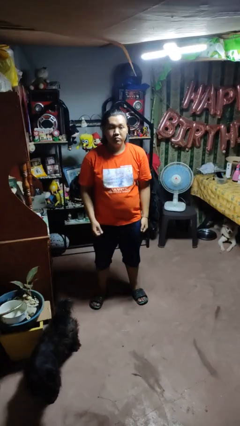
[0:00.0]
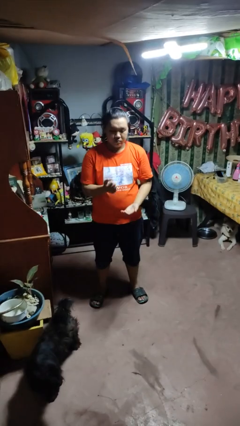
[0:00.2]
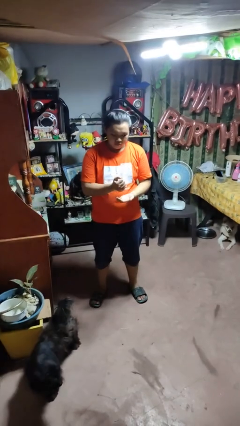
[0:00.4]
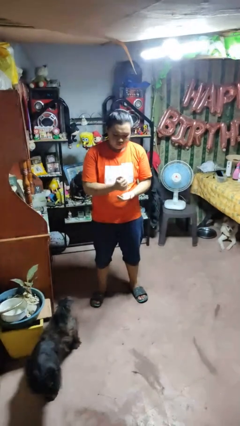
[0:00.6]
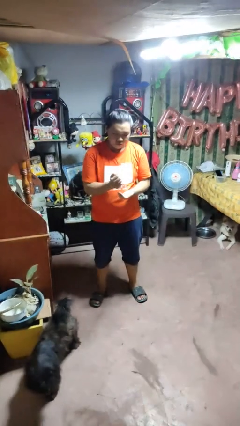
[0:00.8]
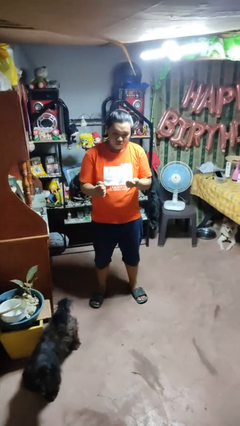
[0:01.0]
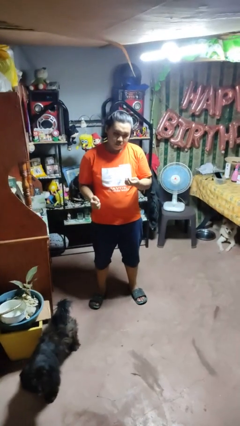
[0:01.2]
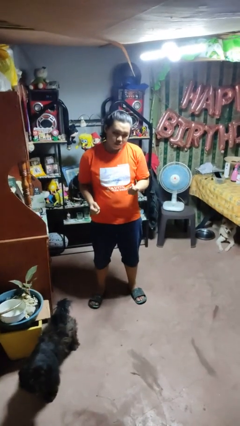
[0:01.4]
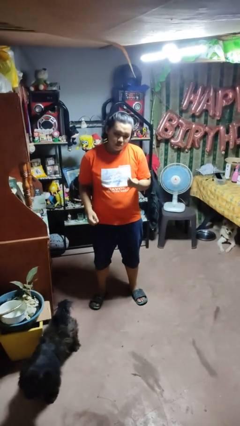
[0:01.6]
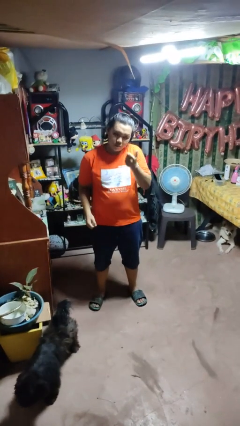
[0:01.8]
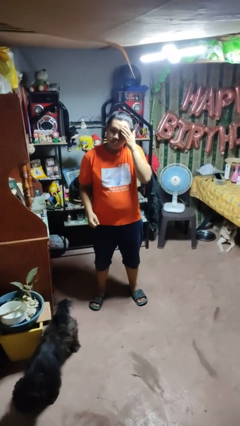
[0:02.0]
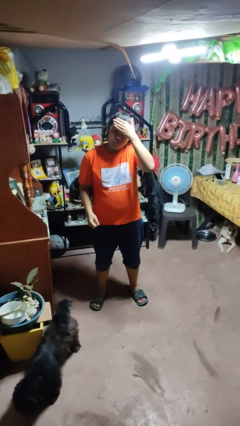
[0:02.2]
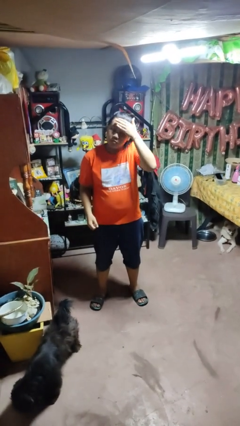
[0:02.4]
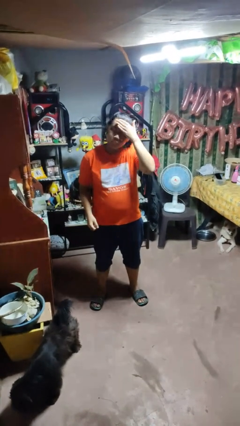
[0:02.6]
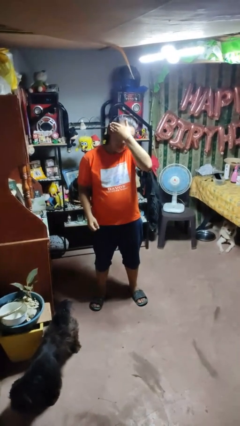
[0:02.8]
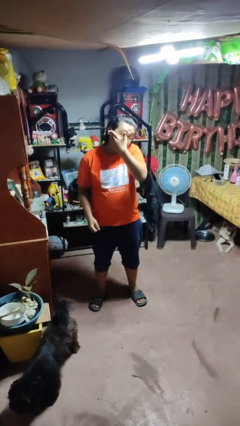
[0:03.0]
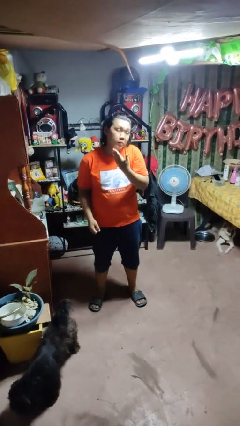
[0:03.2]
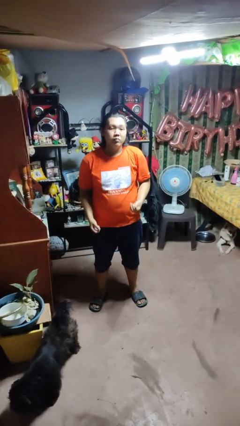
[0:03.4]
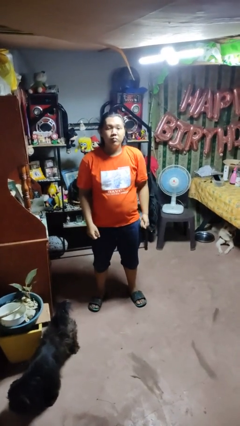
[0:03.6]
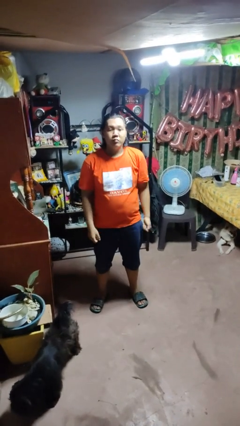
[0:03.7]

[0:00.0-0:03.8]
person applies facial moisturizer

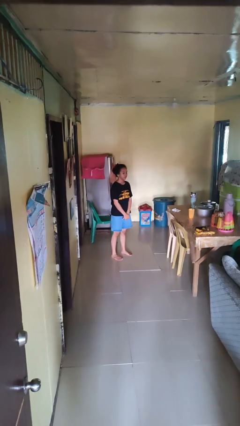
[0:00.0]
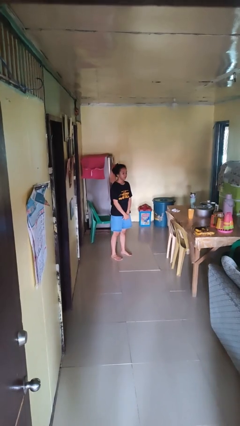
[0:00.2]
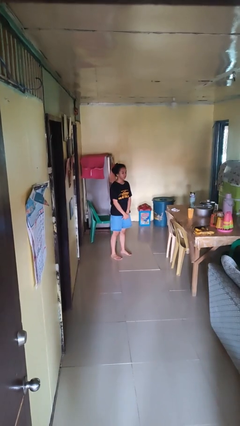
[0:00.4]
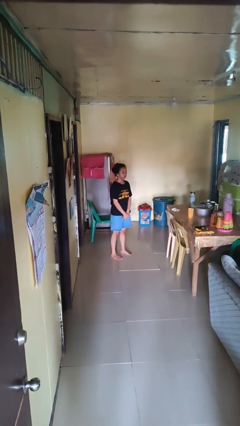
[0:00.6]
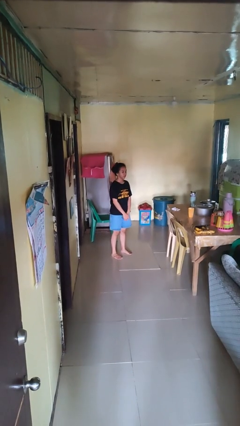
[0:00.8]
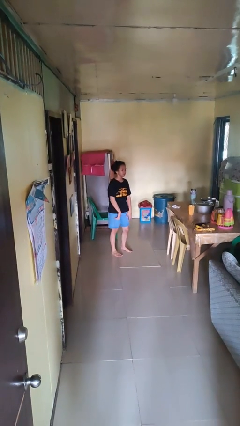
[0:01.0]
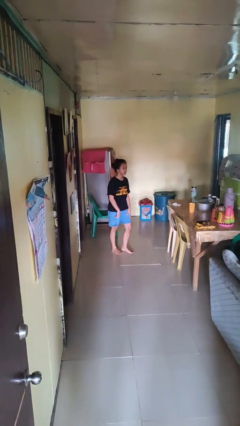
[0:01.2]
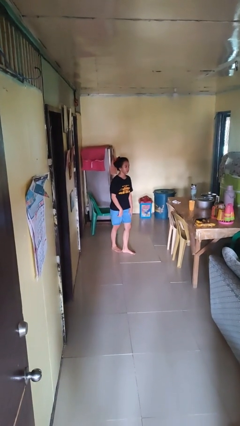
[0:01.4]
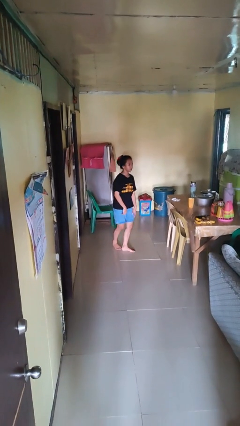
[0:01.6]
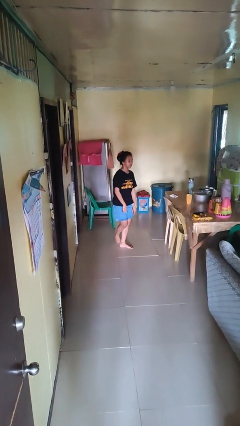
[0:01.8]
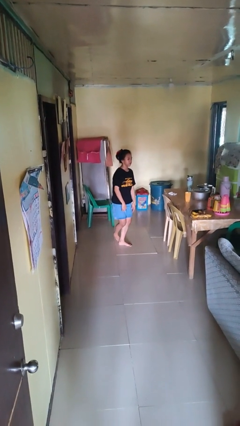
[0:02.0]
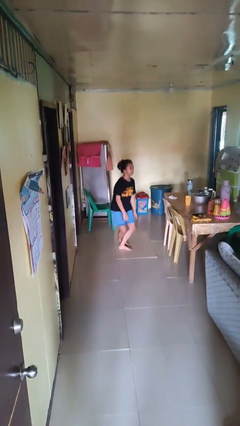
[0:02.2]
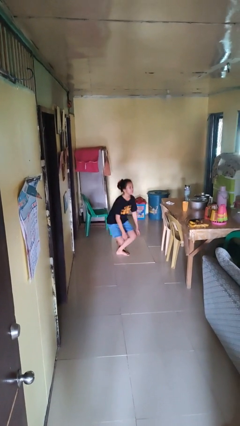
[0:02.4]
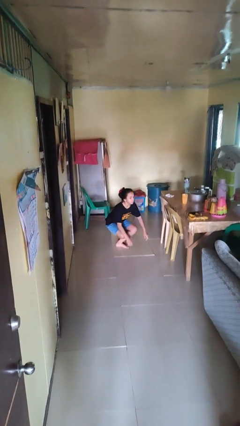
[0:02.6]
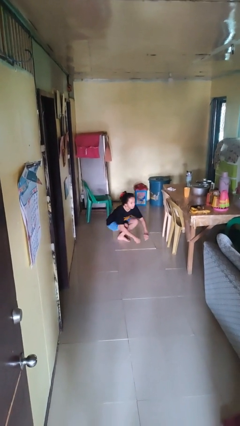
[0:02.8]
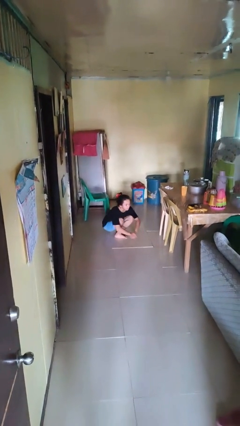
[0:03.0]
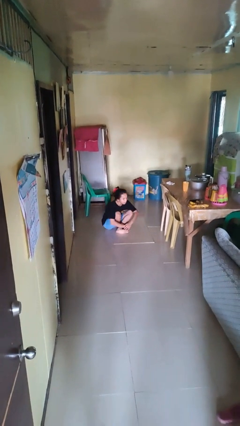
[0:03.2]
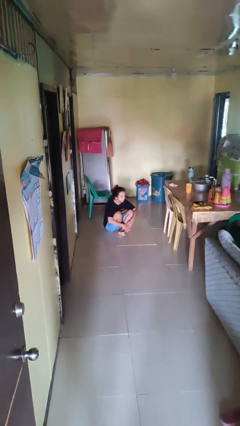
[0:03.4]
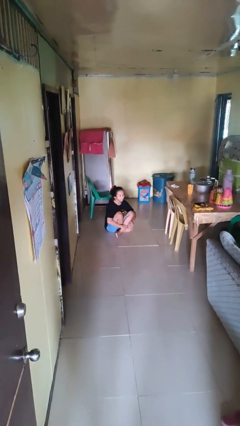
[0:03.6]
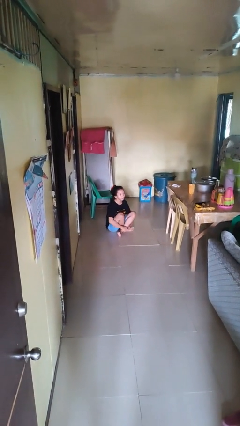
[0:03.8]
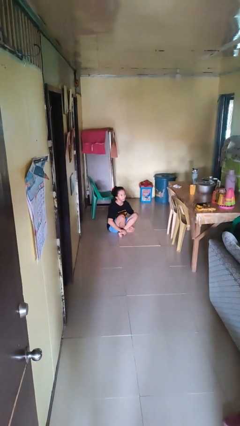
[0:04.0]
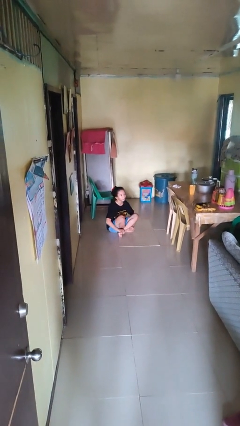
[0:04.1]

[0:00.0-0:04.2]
person sits crisscross

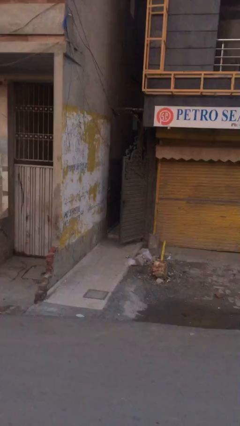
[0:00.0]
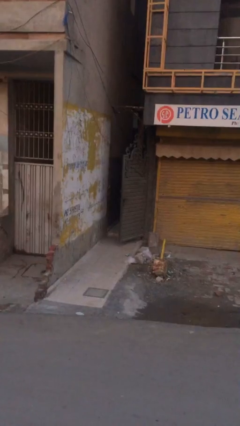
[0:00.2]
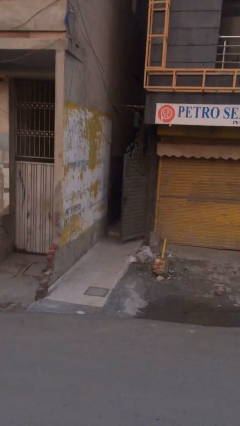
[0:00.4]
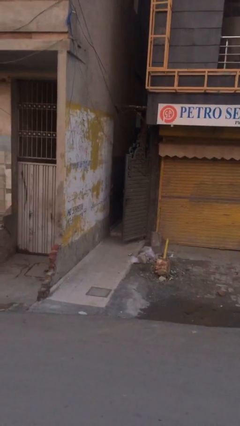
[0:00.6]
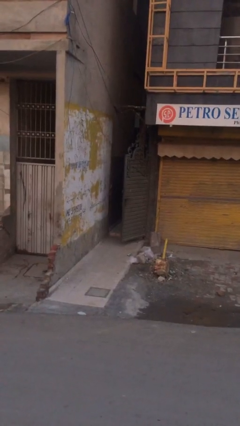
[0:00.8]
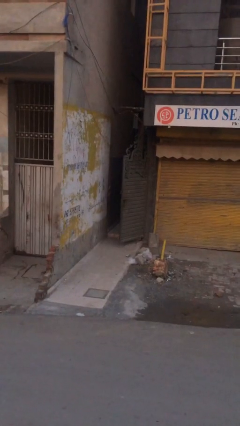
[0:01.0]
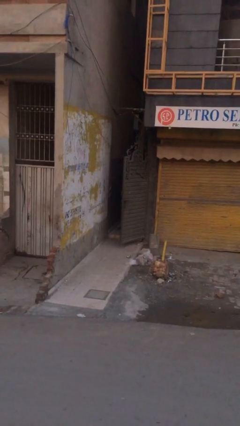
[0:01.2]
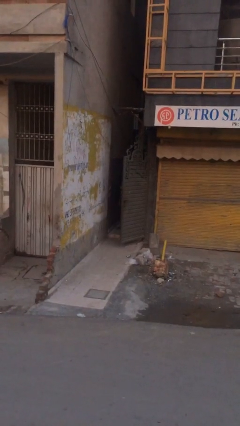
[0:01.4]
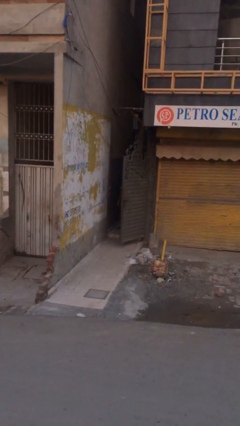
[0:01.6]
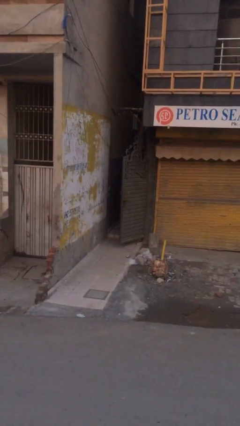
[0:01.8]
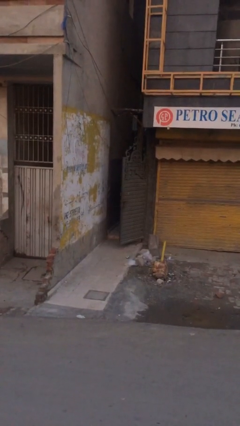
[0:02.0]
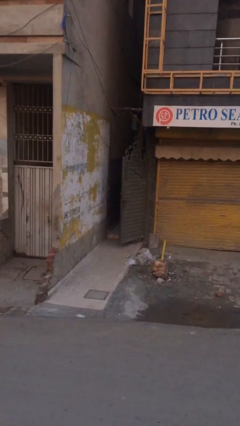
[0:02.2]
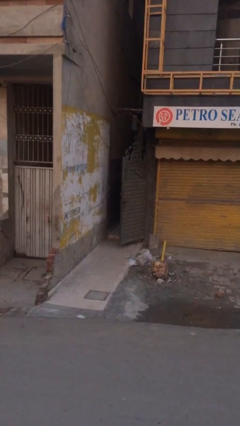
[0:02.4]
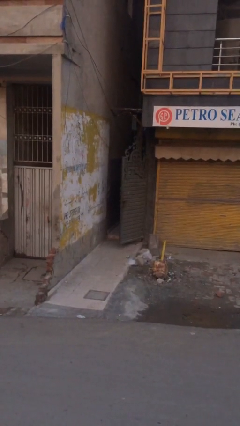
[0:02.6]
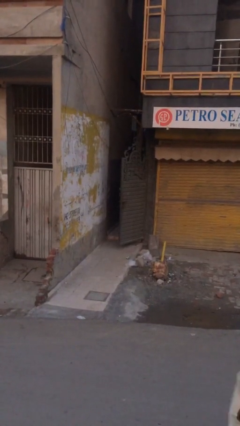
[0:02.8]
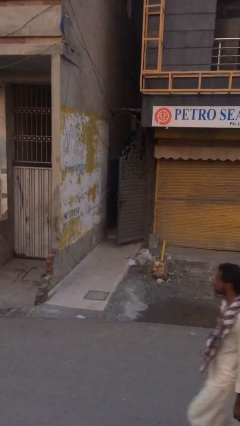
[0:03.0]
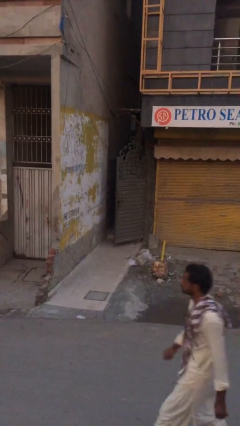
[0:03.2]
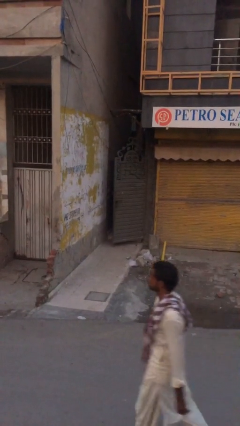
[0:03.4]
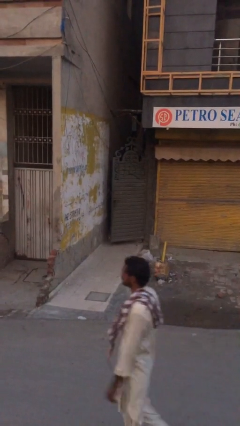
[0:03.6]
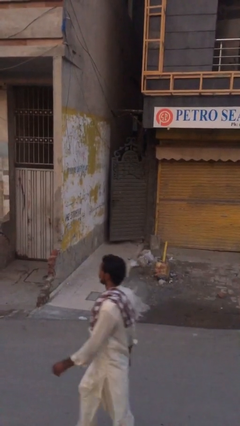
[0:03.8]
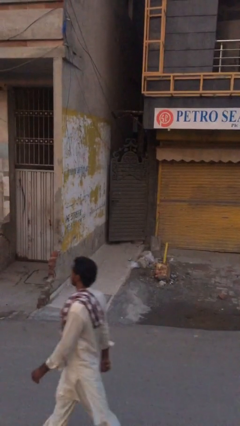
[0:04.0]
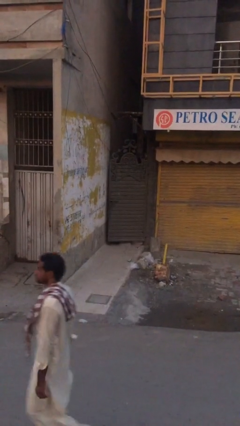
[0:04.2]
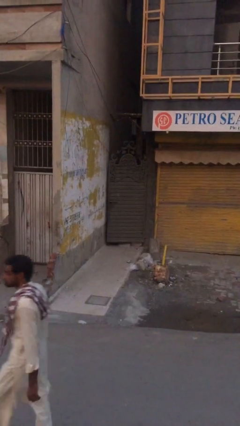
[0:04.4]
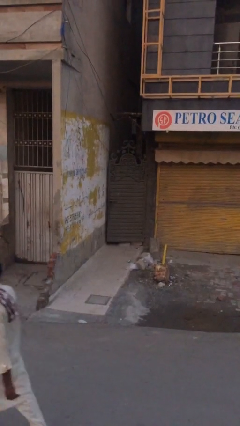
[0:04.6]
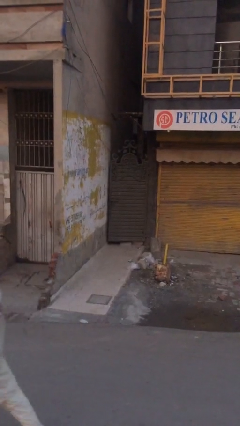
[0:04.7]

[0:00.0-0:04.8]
person closes facility door

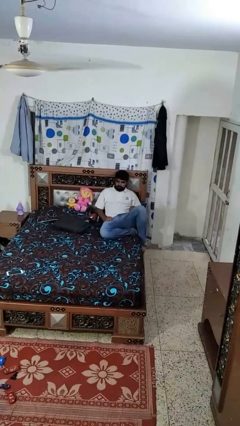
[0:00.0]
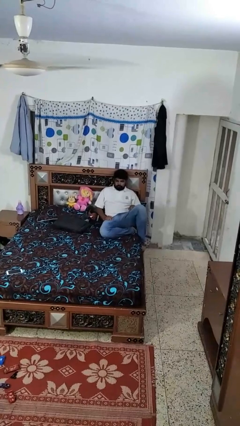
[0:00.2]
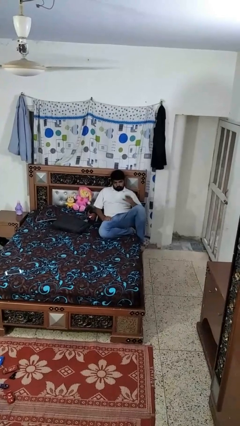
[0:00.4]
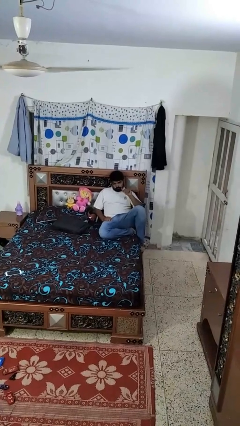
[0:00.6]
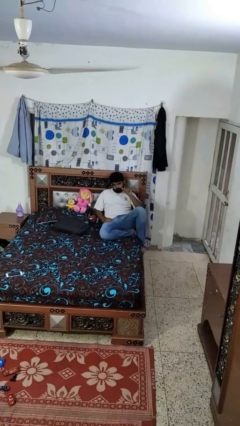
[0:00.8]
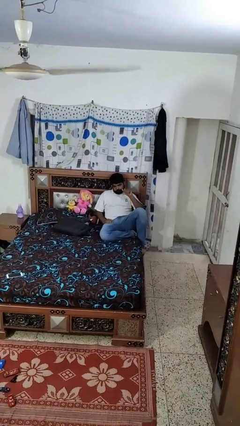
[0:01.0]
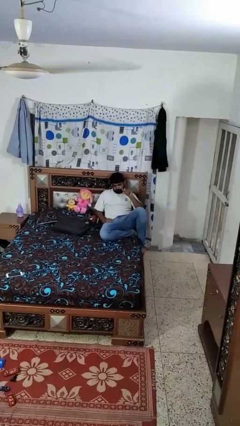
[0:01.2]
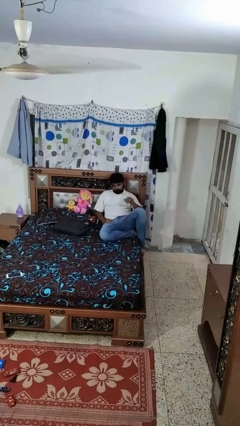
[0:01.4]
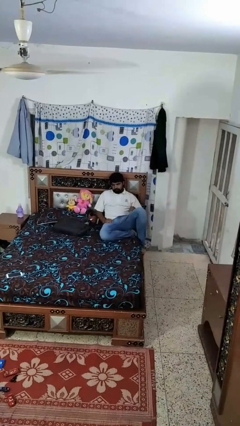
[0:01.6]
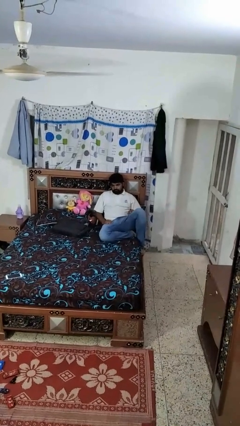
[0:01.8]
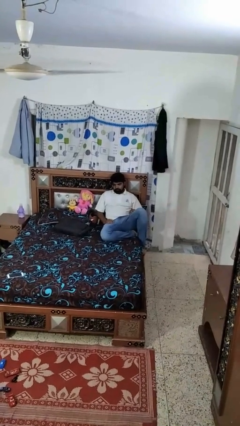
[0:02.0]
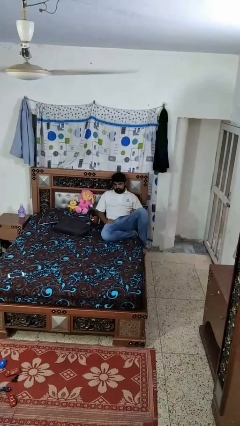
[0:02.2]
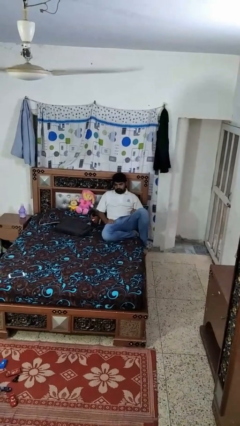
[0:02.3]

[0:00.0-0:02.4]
person gestures come here

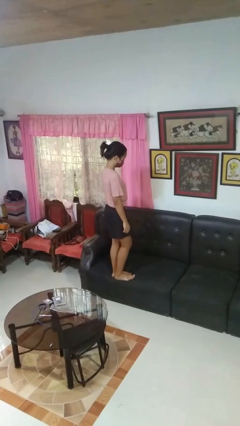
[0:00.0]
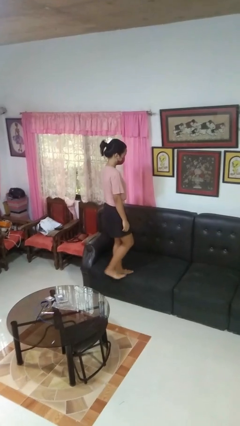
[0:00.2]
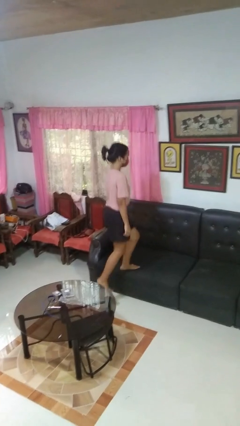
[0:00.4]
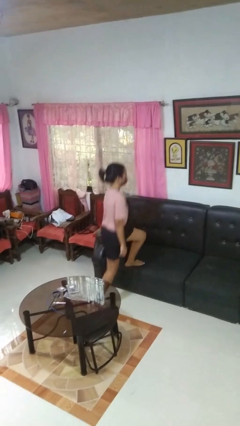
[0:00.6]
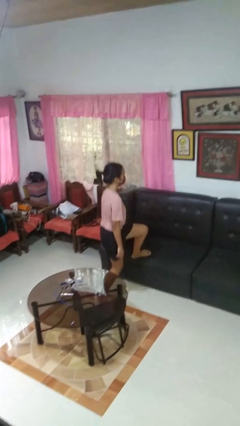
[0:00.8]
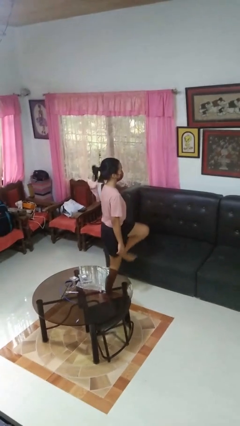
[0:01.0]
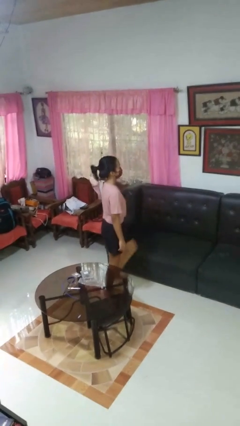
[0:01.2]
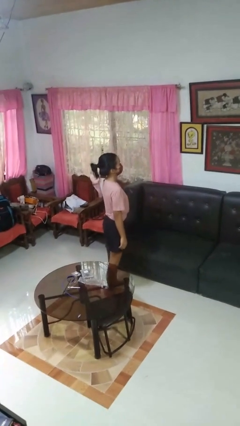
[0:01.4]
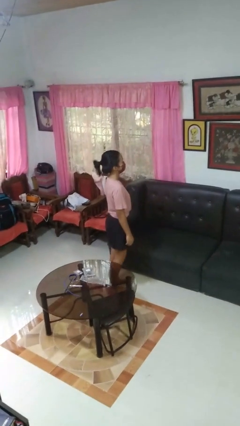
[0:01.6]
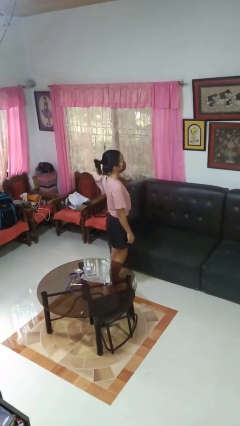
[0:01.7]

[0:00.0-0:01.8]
person climbs off couch
